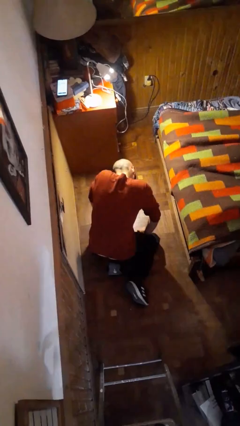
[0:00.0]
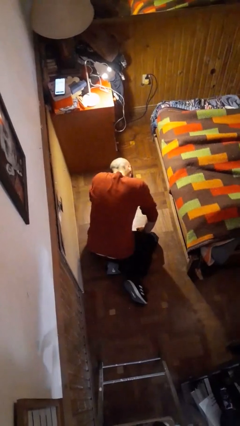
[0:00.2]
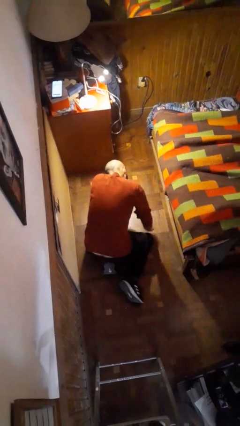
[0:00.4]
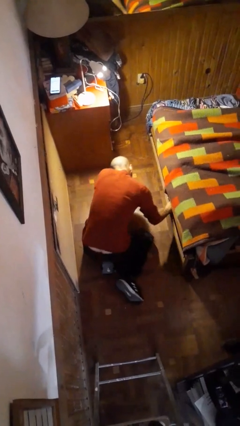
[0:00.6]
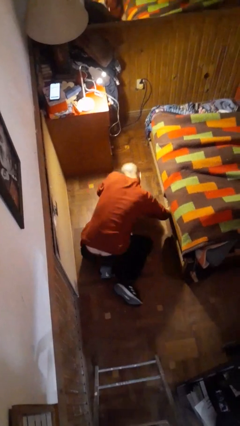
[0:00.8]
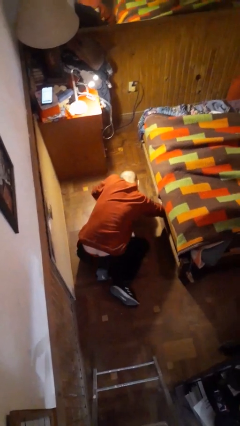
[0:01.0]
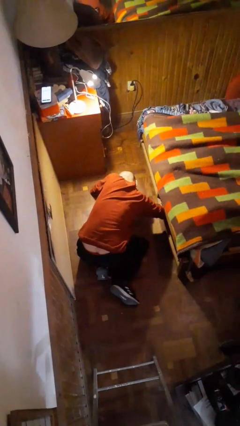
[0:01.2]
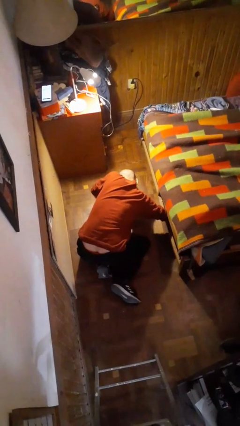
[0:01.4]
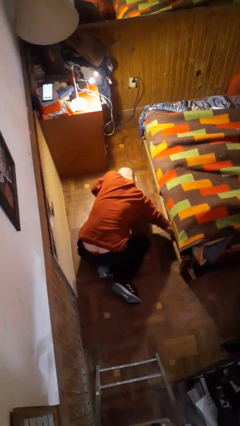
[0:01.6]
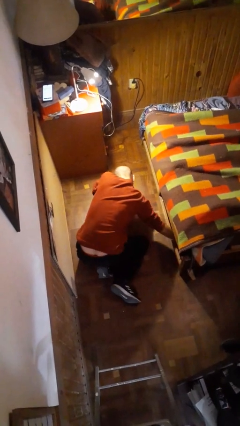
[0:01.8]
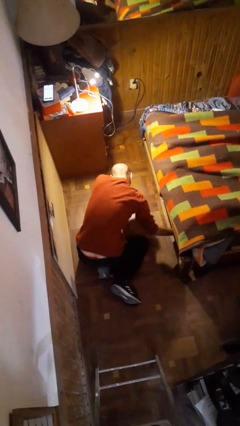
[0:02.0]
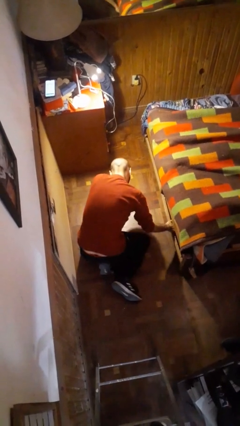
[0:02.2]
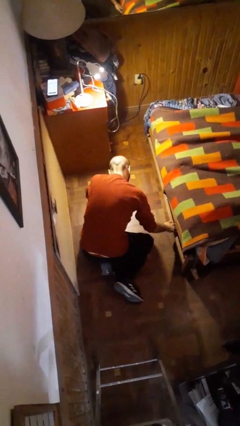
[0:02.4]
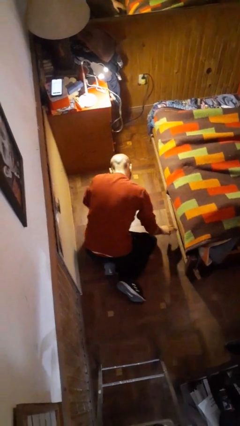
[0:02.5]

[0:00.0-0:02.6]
person searches under bed

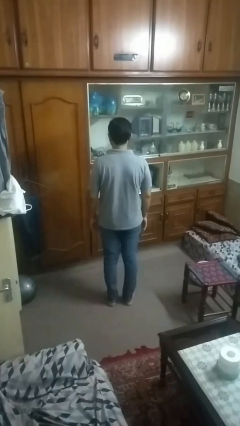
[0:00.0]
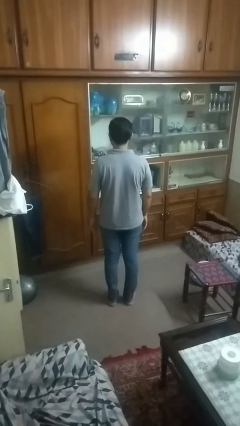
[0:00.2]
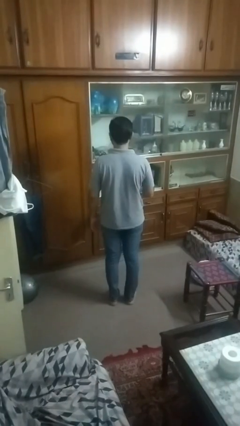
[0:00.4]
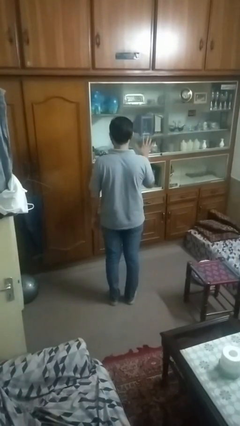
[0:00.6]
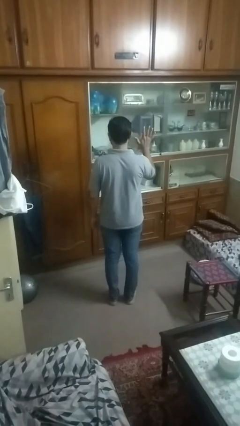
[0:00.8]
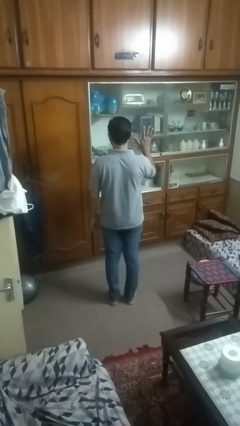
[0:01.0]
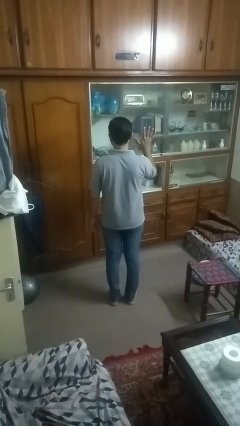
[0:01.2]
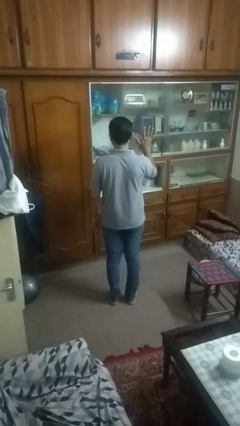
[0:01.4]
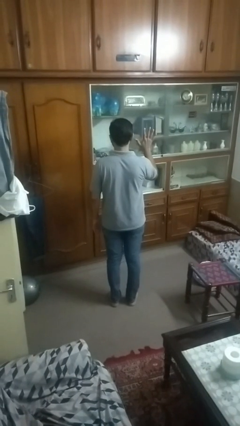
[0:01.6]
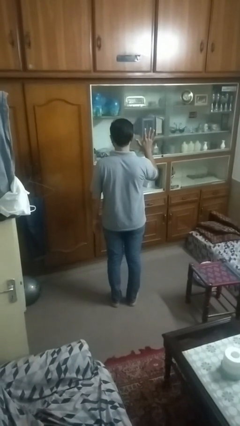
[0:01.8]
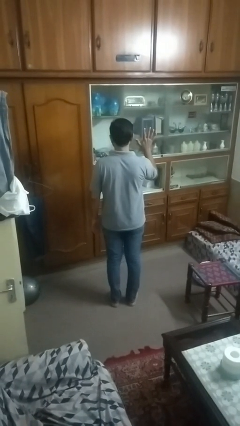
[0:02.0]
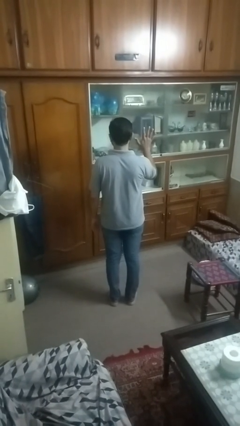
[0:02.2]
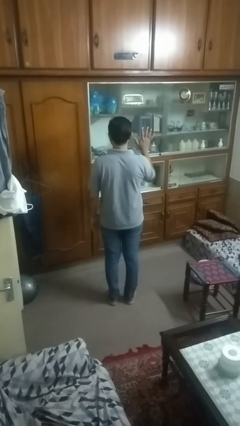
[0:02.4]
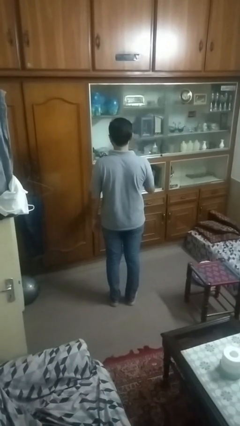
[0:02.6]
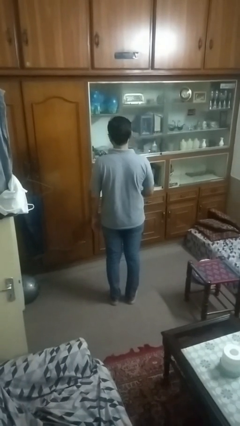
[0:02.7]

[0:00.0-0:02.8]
person gestures number five

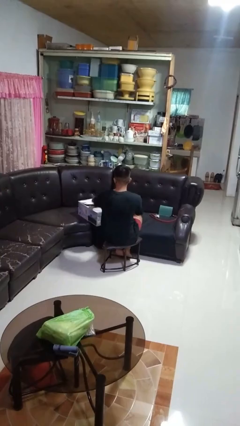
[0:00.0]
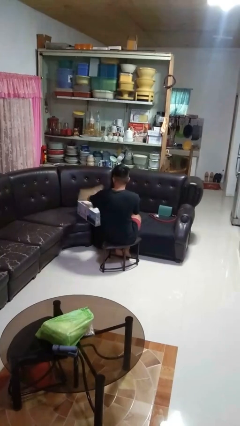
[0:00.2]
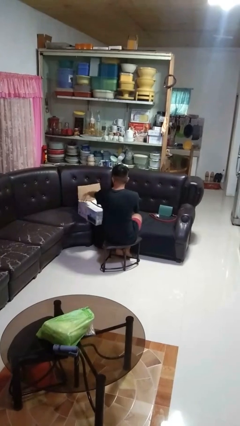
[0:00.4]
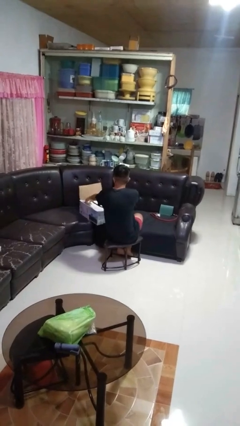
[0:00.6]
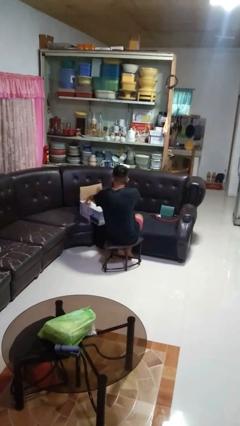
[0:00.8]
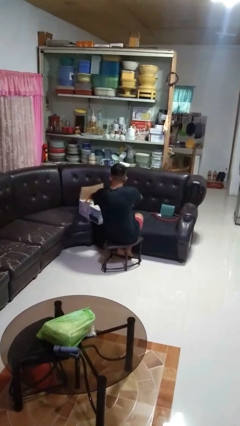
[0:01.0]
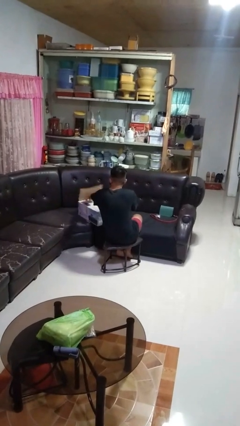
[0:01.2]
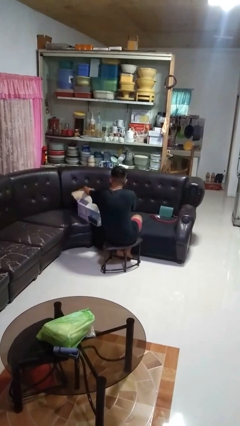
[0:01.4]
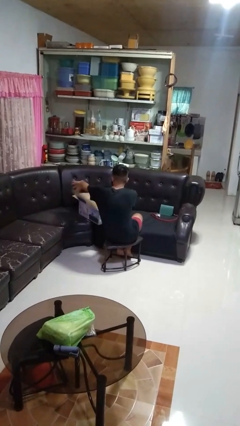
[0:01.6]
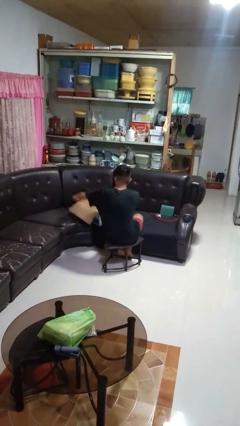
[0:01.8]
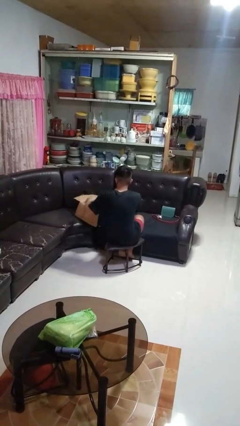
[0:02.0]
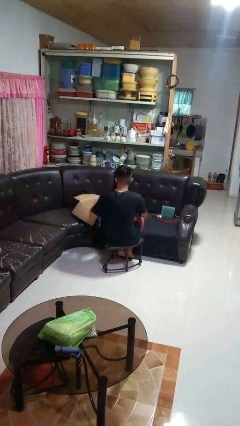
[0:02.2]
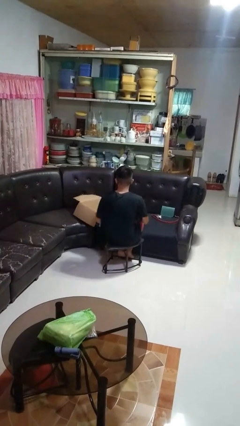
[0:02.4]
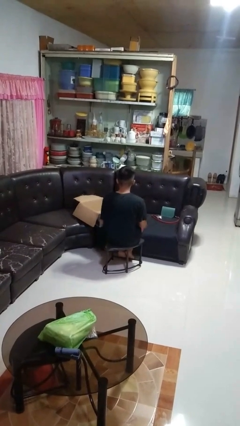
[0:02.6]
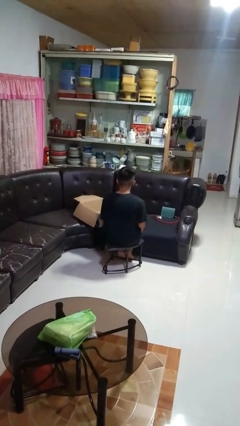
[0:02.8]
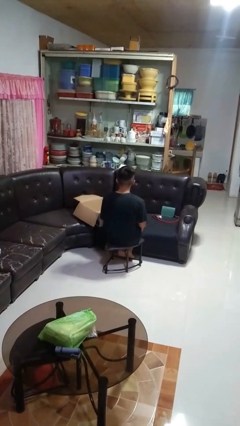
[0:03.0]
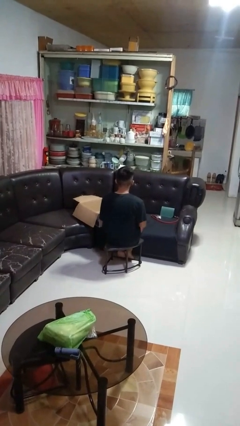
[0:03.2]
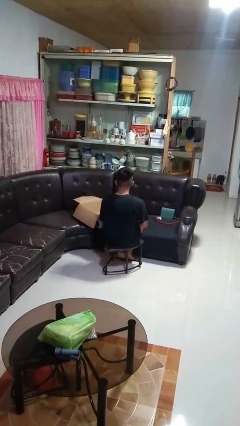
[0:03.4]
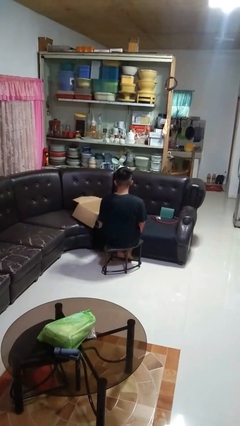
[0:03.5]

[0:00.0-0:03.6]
person opens box

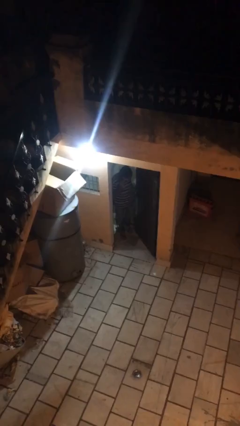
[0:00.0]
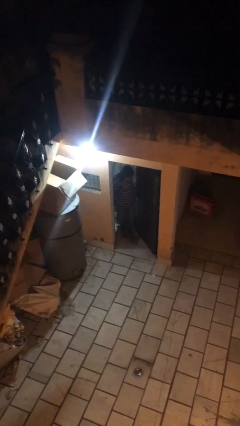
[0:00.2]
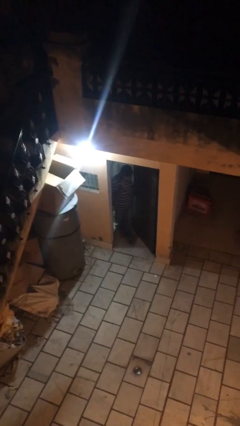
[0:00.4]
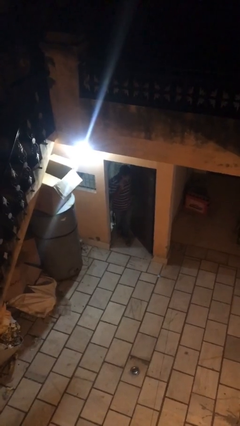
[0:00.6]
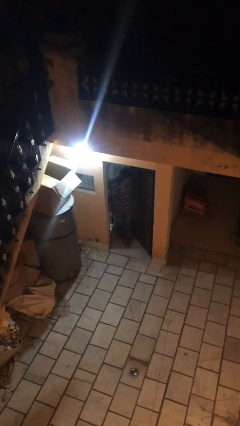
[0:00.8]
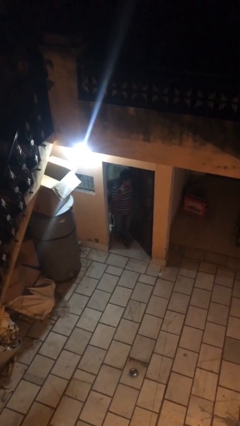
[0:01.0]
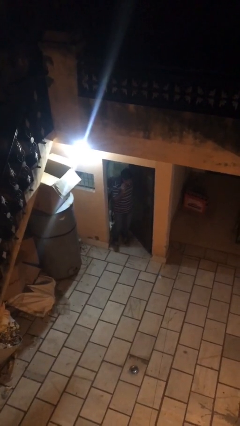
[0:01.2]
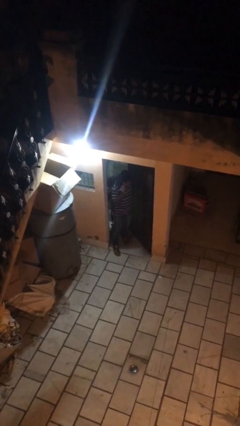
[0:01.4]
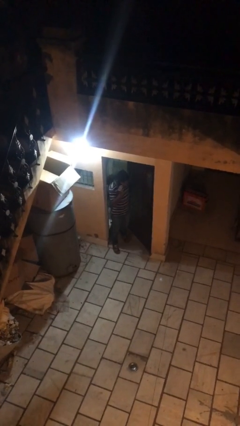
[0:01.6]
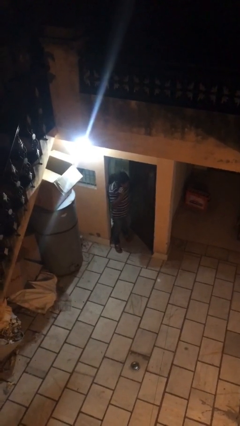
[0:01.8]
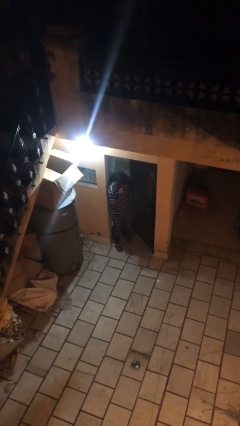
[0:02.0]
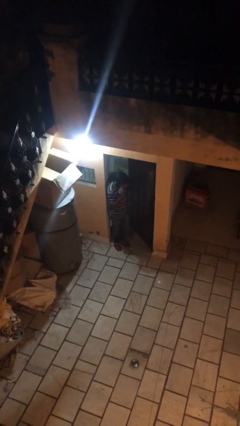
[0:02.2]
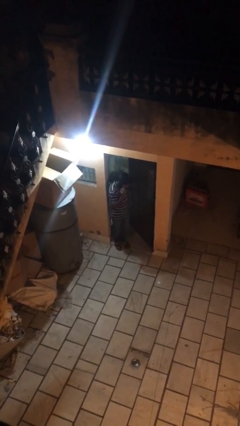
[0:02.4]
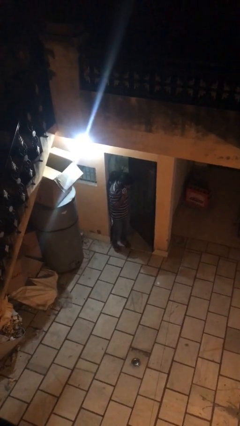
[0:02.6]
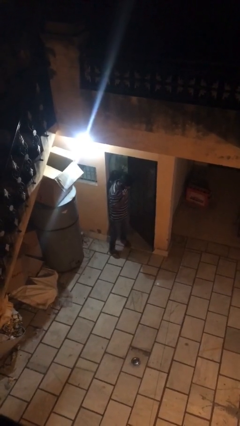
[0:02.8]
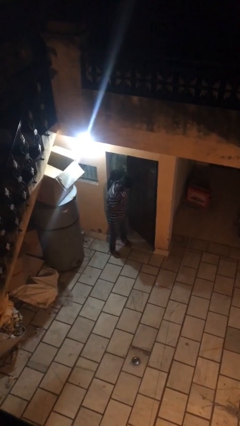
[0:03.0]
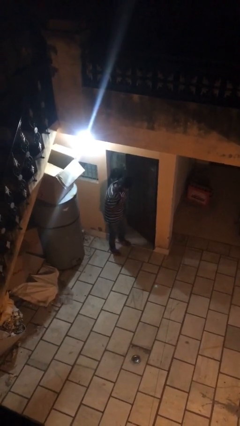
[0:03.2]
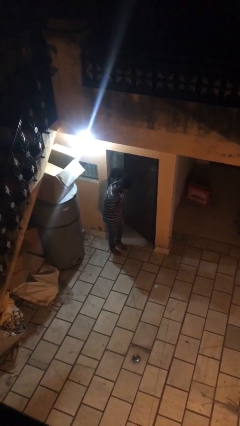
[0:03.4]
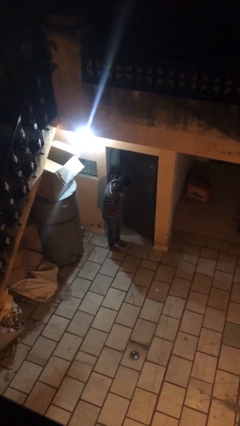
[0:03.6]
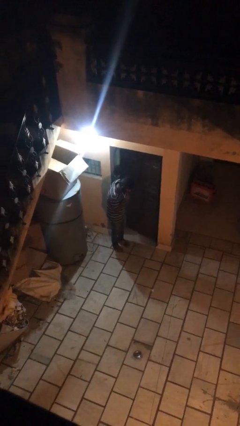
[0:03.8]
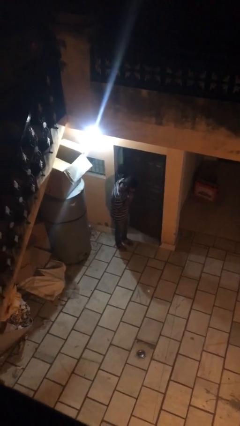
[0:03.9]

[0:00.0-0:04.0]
person enters scene through structure

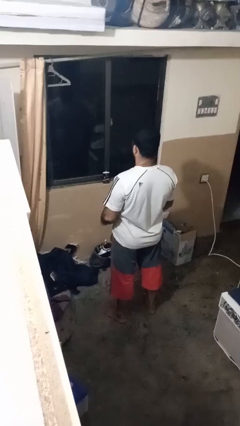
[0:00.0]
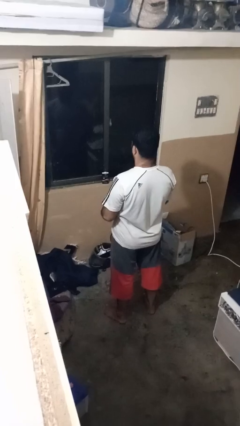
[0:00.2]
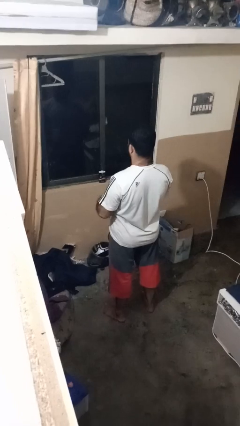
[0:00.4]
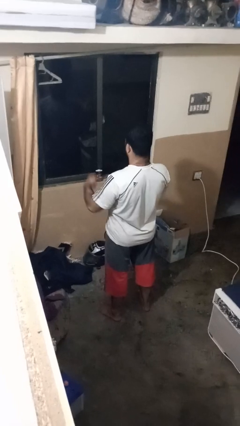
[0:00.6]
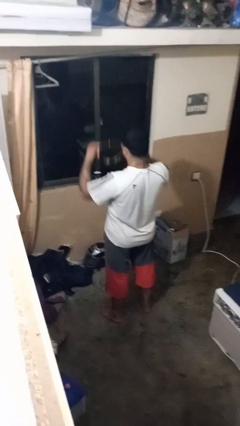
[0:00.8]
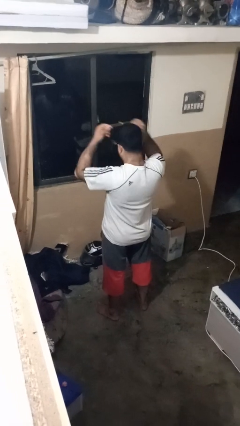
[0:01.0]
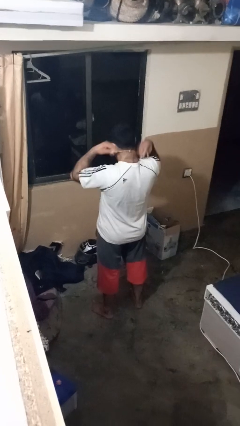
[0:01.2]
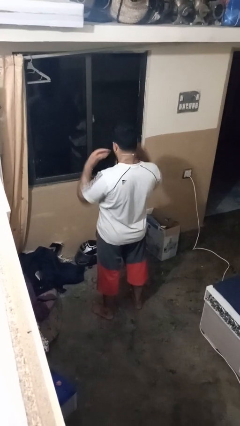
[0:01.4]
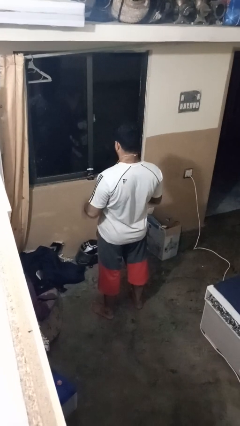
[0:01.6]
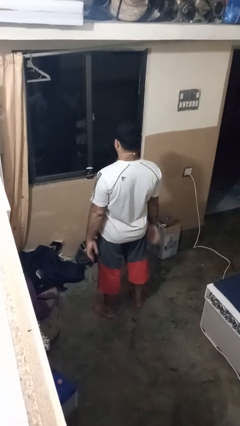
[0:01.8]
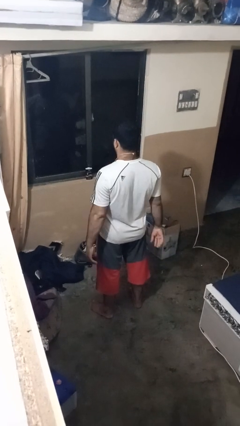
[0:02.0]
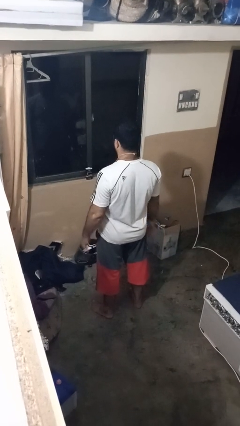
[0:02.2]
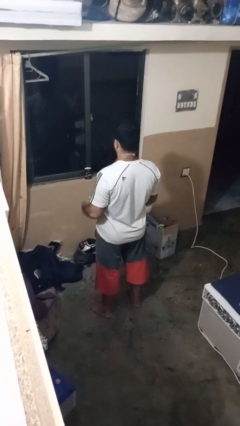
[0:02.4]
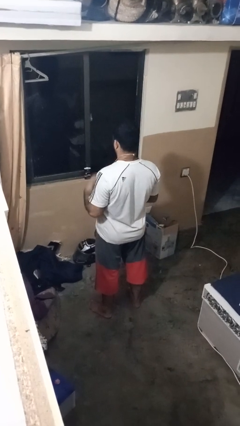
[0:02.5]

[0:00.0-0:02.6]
person puts on necklace

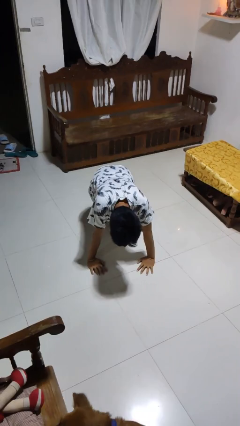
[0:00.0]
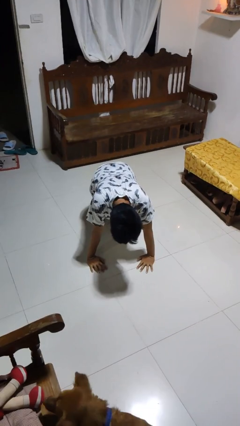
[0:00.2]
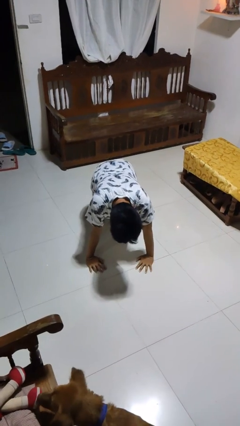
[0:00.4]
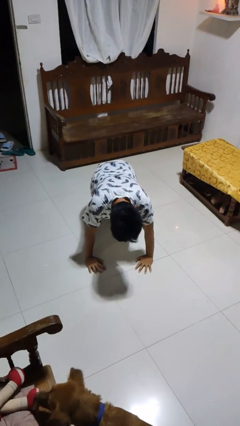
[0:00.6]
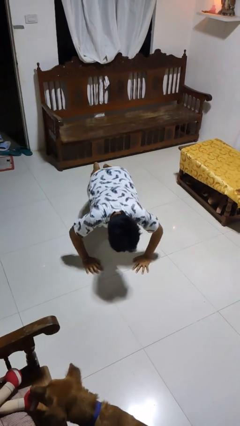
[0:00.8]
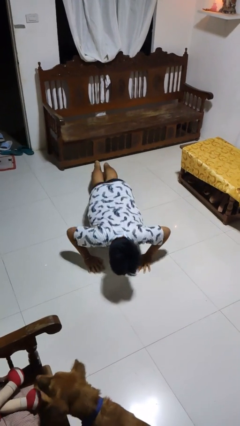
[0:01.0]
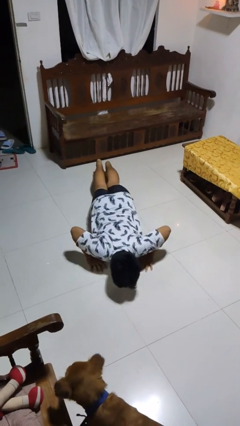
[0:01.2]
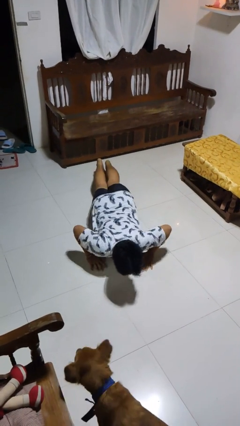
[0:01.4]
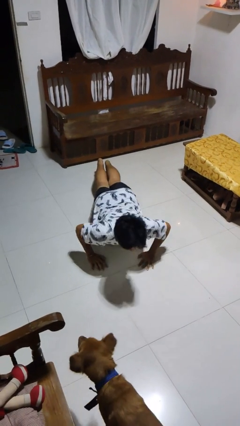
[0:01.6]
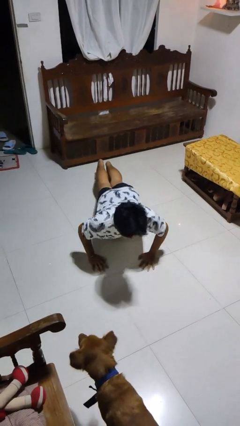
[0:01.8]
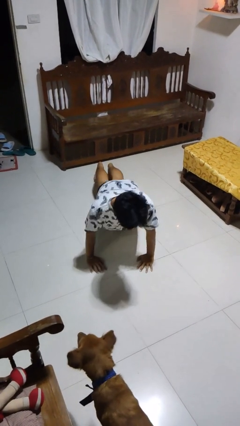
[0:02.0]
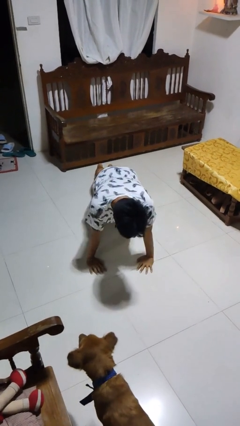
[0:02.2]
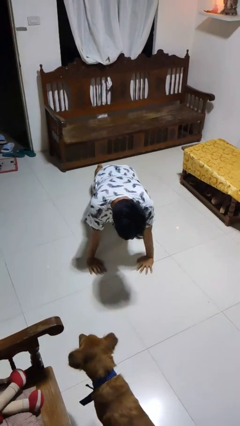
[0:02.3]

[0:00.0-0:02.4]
person exercises with pushup
